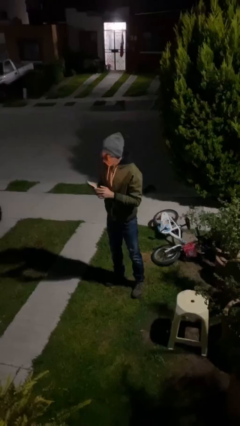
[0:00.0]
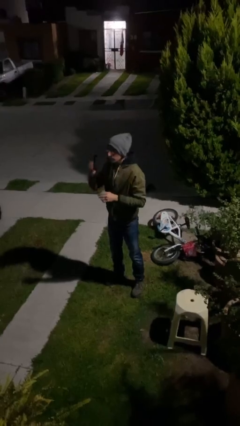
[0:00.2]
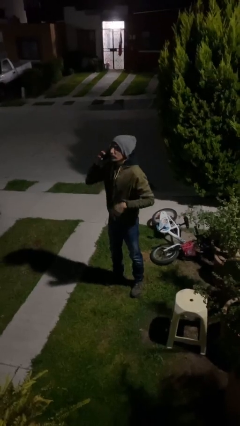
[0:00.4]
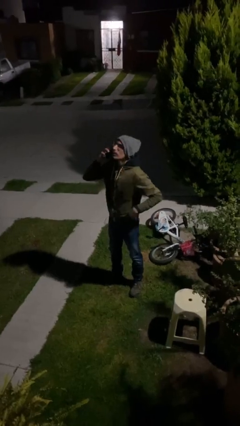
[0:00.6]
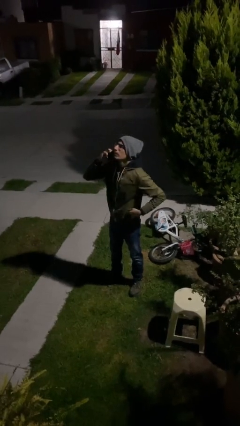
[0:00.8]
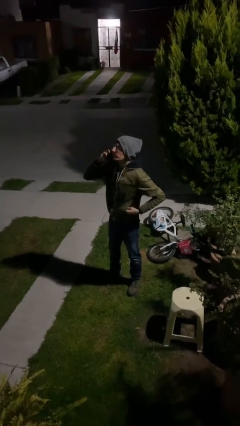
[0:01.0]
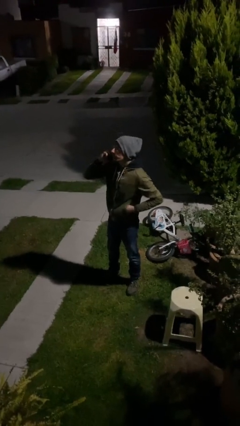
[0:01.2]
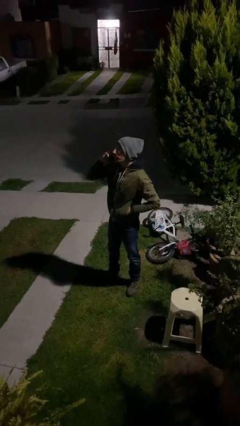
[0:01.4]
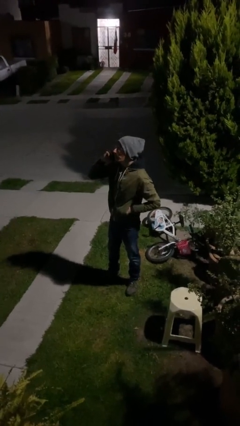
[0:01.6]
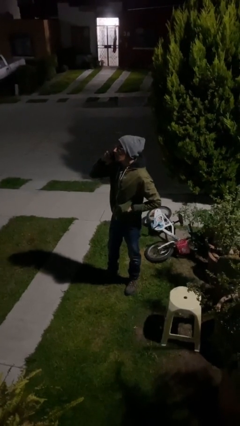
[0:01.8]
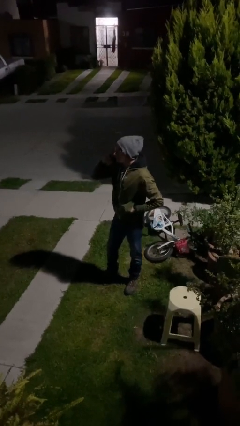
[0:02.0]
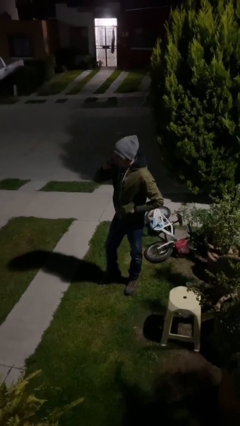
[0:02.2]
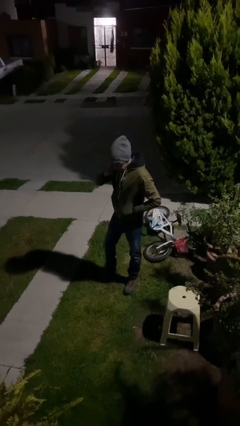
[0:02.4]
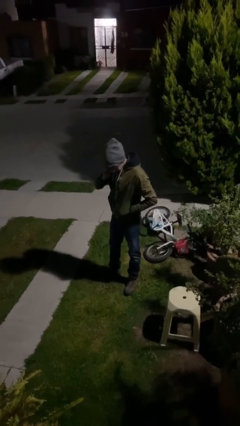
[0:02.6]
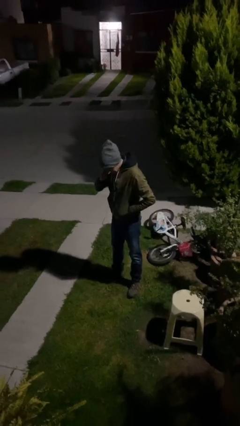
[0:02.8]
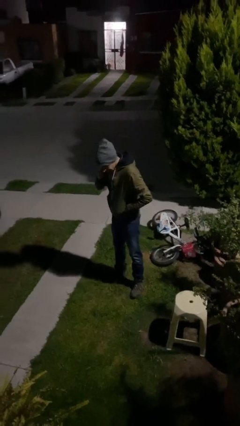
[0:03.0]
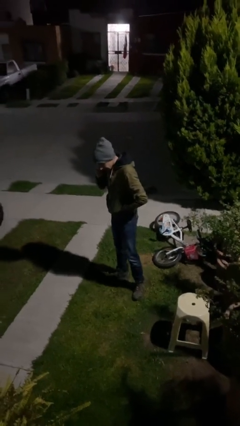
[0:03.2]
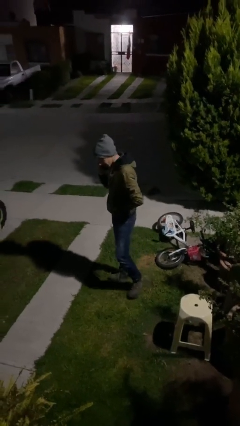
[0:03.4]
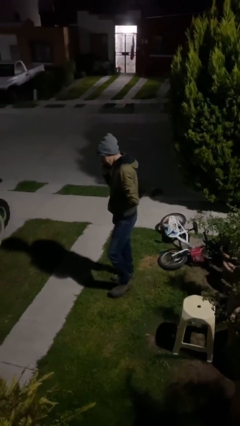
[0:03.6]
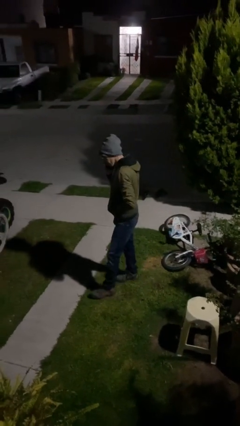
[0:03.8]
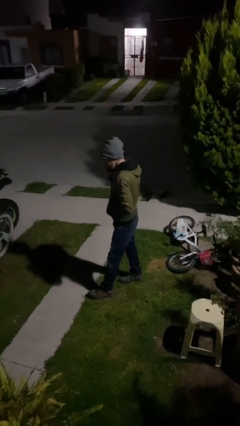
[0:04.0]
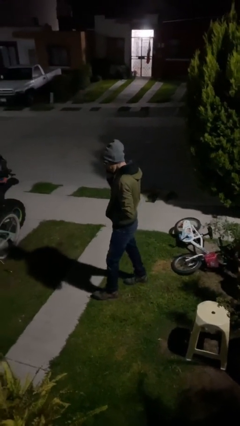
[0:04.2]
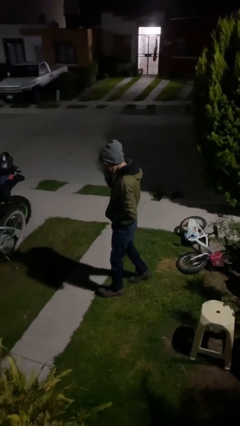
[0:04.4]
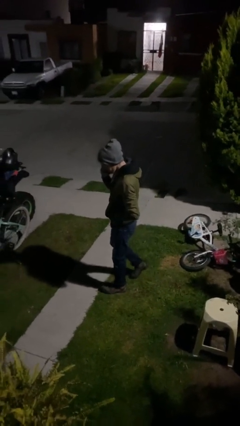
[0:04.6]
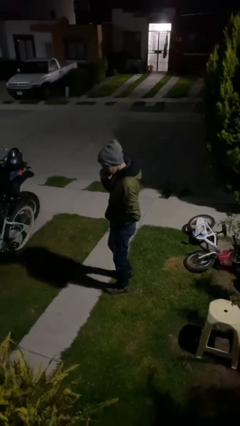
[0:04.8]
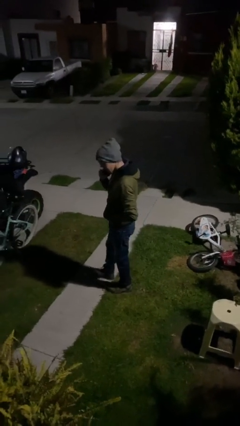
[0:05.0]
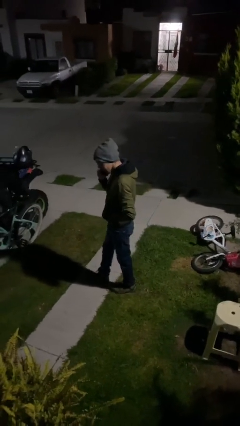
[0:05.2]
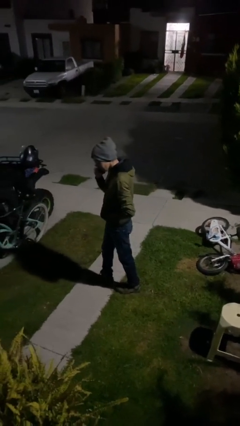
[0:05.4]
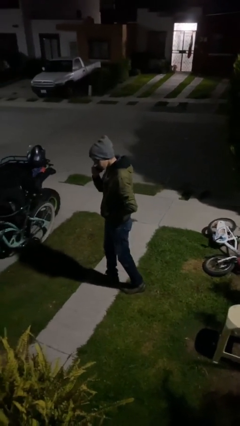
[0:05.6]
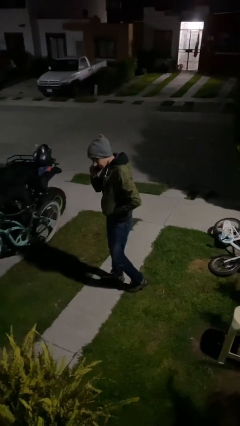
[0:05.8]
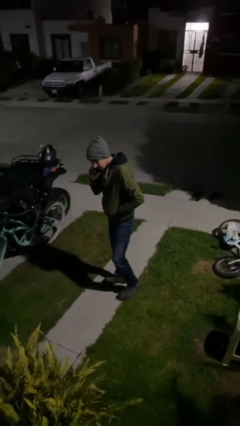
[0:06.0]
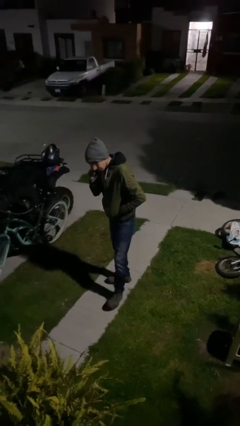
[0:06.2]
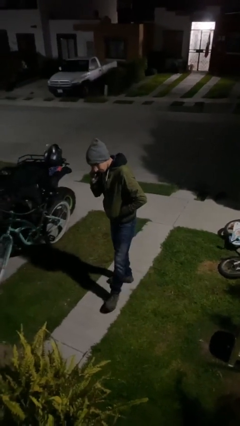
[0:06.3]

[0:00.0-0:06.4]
person talks on phone

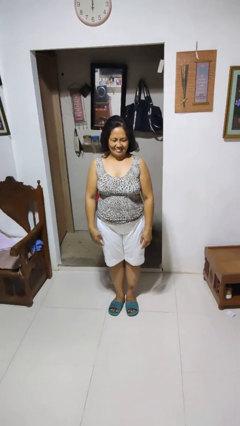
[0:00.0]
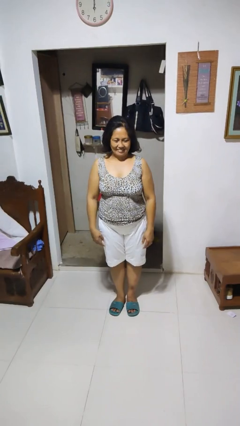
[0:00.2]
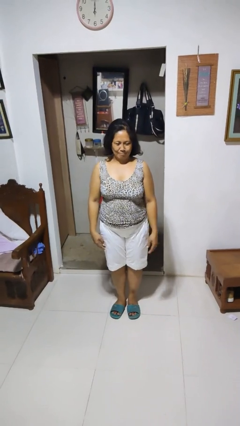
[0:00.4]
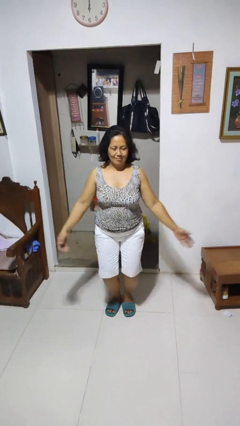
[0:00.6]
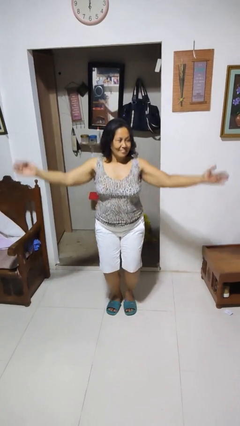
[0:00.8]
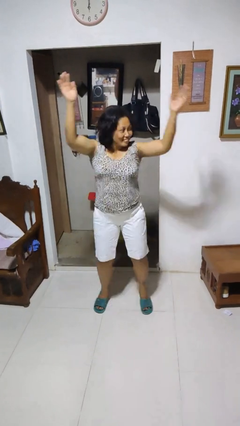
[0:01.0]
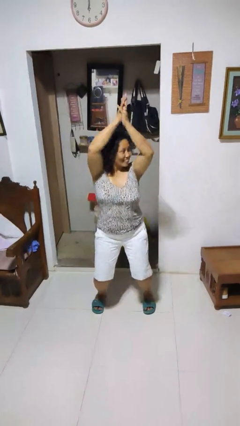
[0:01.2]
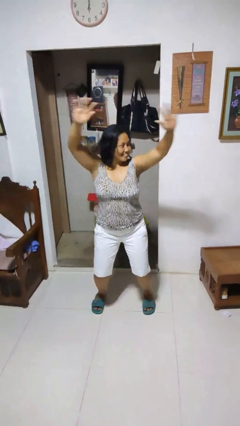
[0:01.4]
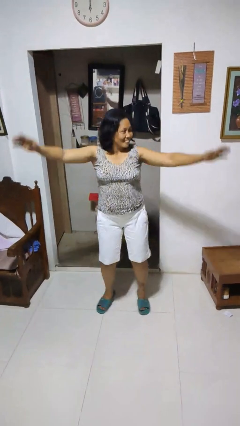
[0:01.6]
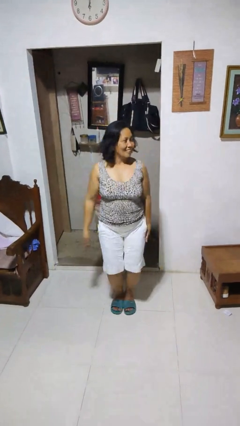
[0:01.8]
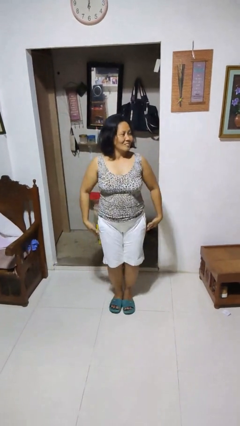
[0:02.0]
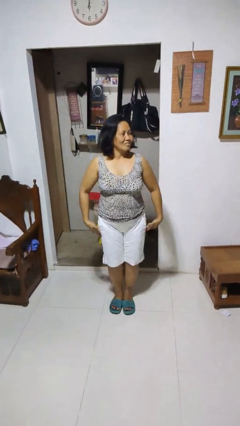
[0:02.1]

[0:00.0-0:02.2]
person exercises with jumping jacks

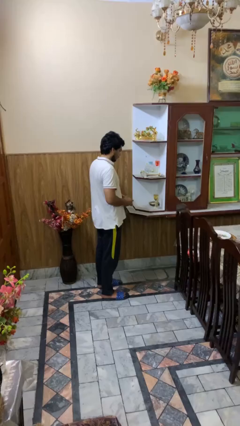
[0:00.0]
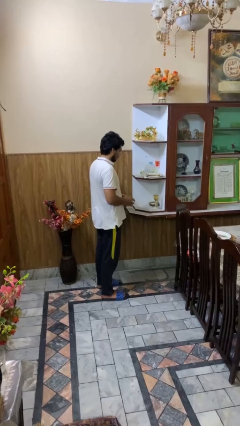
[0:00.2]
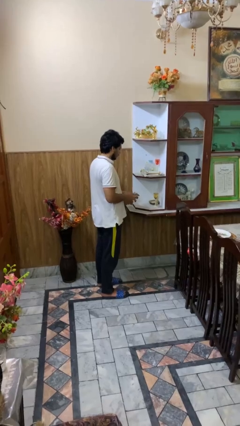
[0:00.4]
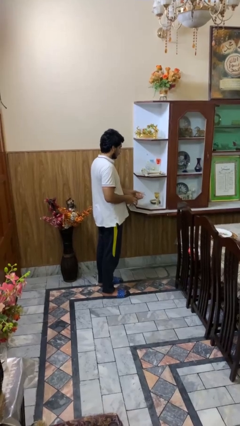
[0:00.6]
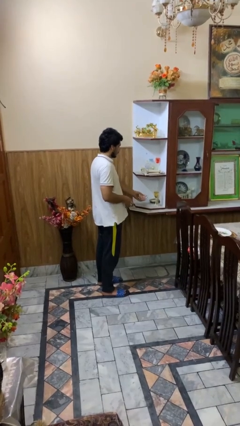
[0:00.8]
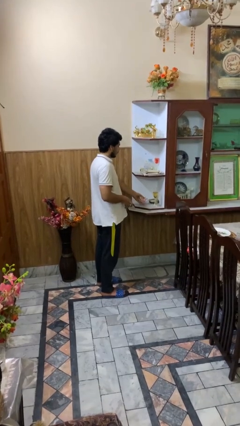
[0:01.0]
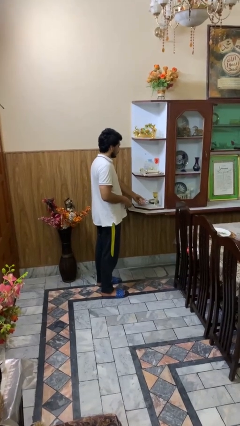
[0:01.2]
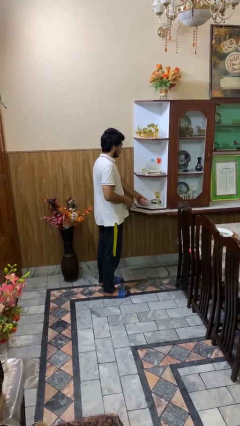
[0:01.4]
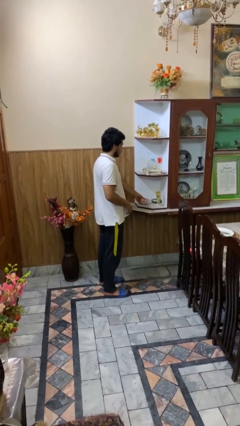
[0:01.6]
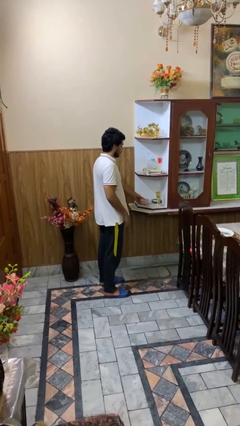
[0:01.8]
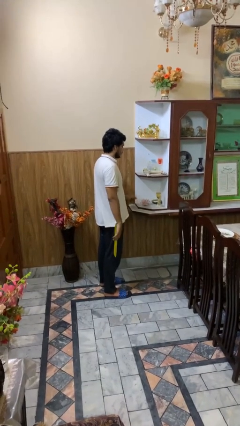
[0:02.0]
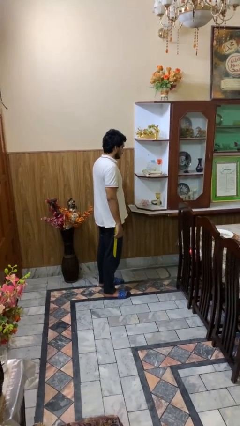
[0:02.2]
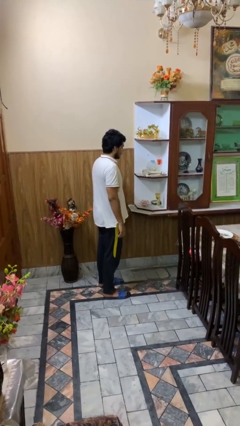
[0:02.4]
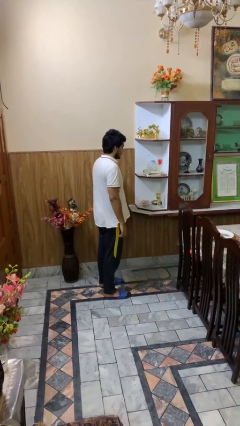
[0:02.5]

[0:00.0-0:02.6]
person puts down object into cabinet

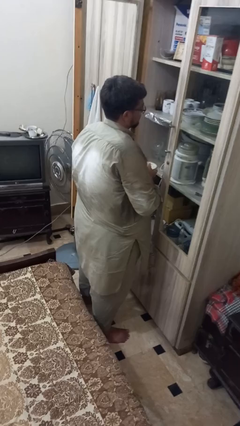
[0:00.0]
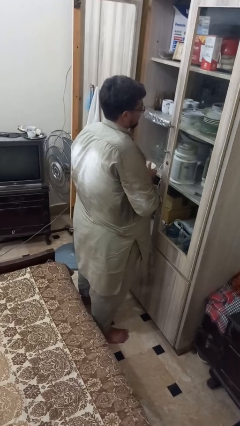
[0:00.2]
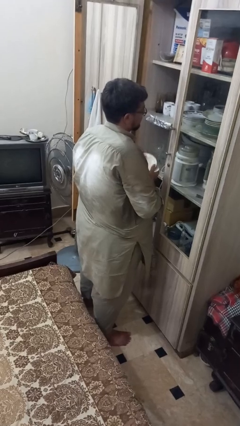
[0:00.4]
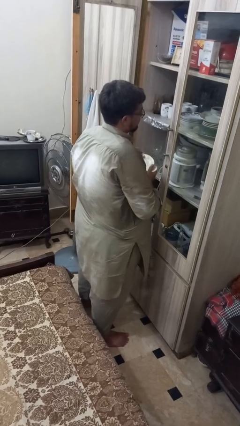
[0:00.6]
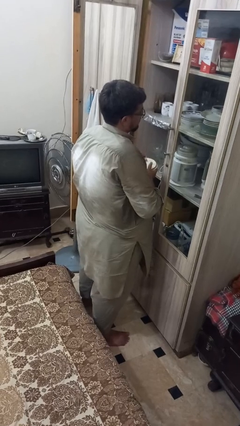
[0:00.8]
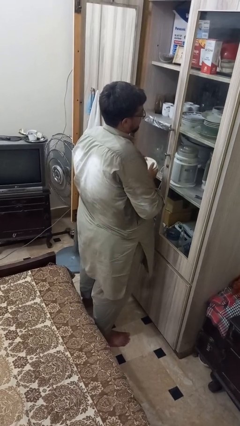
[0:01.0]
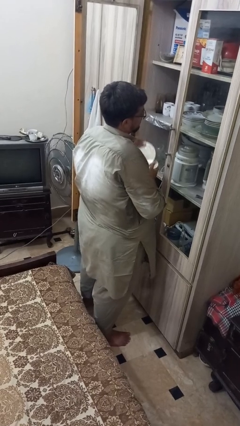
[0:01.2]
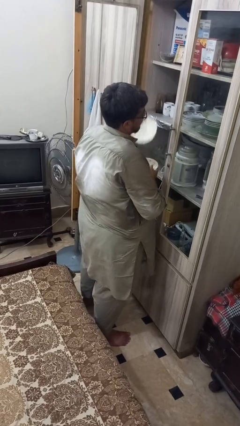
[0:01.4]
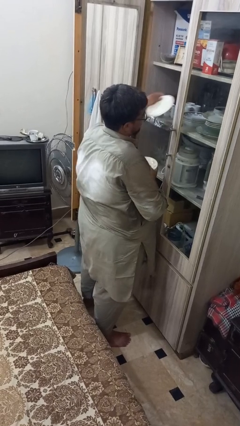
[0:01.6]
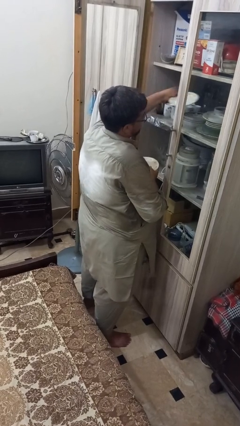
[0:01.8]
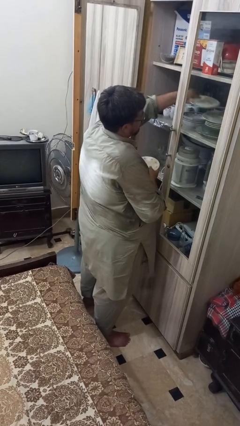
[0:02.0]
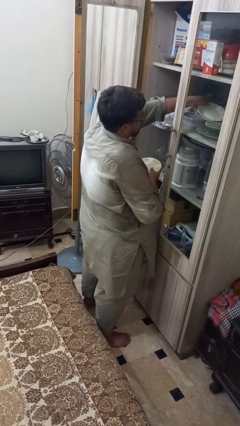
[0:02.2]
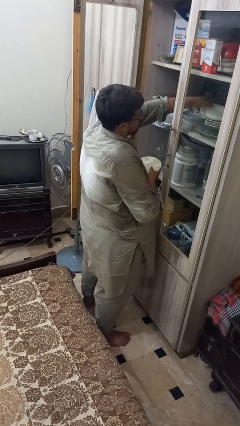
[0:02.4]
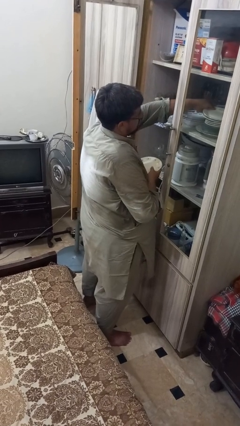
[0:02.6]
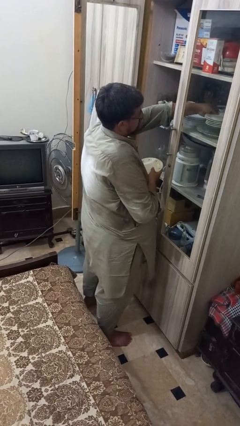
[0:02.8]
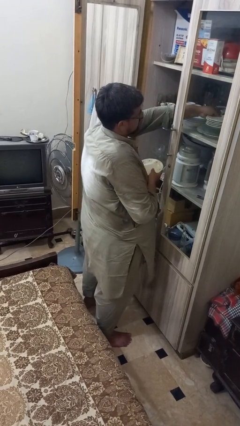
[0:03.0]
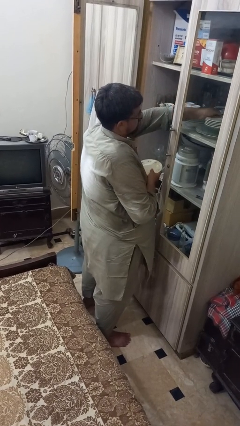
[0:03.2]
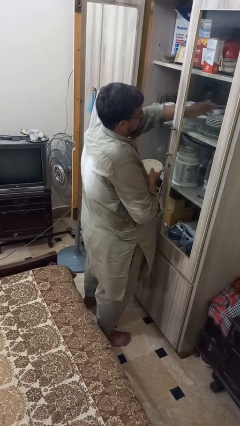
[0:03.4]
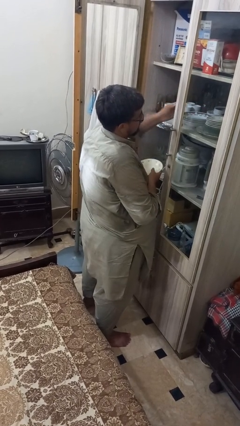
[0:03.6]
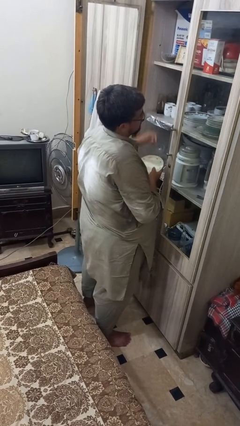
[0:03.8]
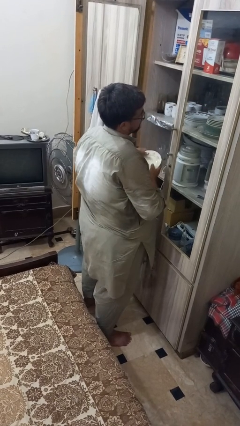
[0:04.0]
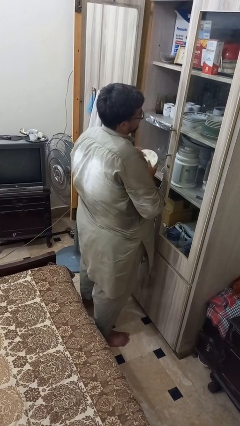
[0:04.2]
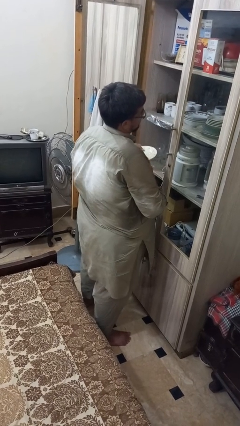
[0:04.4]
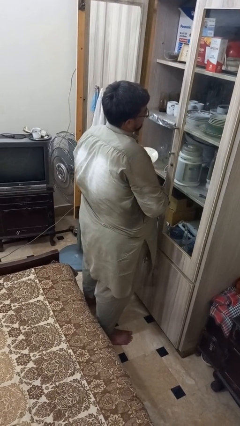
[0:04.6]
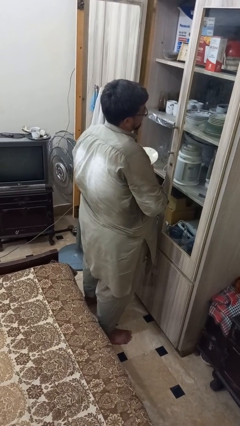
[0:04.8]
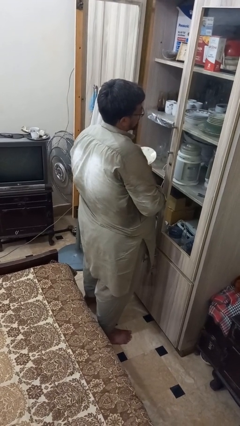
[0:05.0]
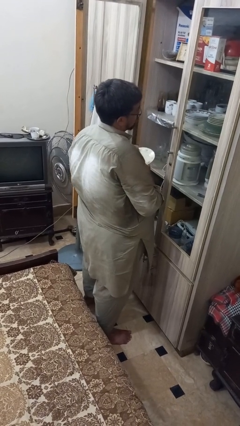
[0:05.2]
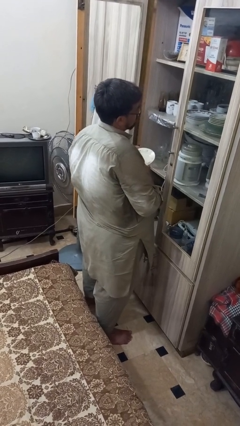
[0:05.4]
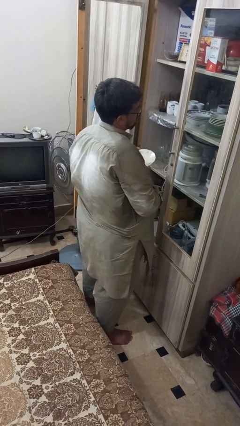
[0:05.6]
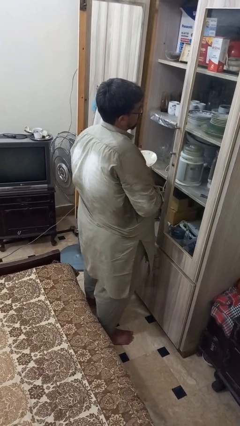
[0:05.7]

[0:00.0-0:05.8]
person loads groceries into cabinet

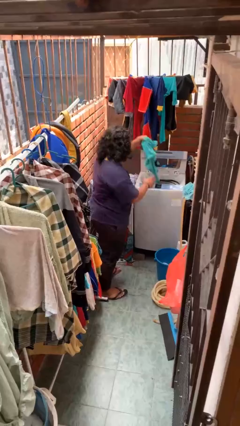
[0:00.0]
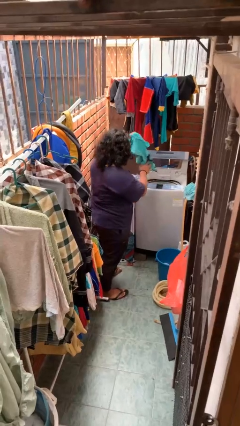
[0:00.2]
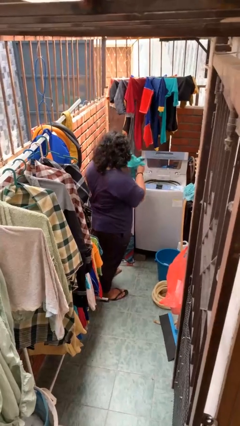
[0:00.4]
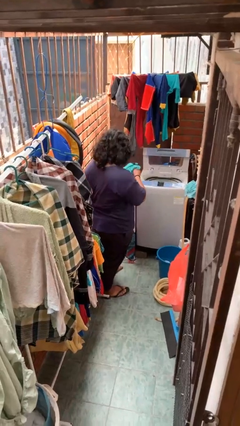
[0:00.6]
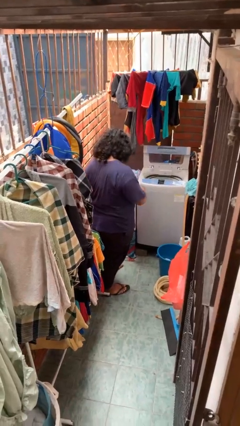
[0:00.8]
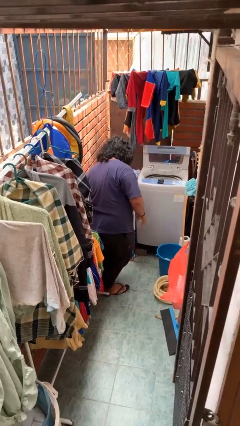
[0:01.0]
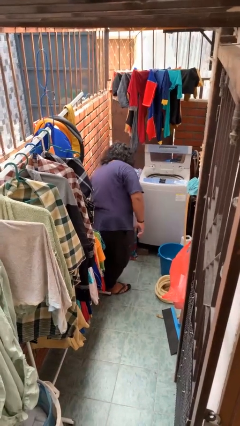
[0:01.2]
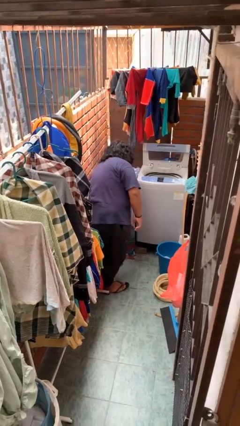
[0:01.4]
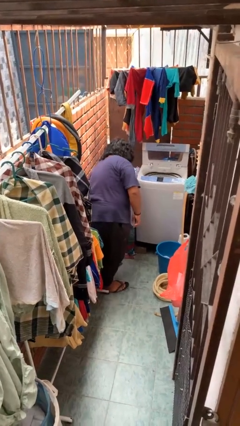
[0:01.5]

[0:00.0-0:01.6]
person unloads clotheswasher
